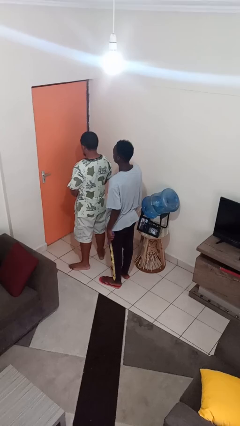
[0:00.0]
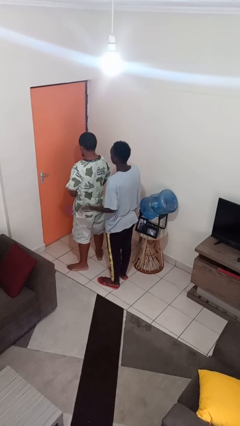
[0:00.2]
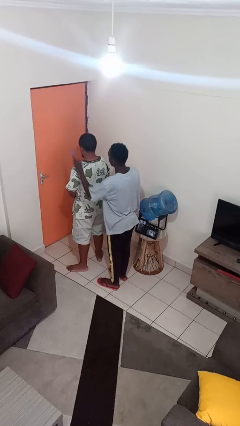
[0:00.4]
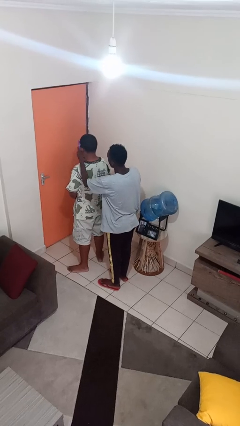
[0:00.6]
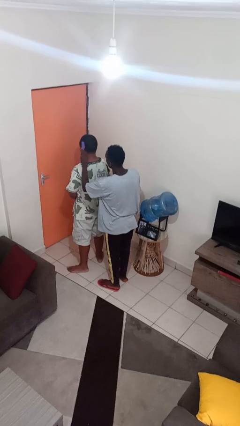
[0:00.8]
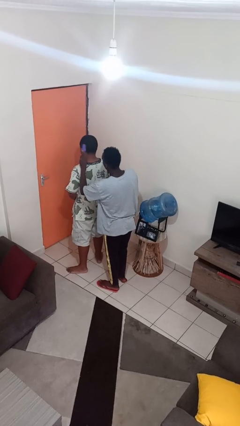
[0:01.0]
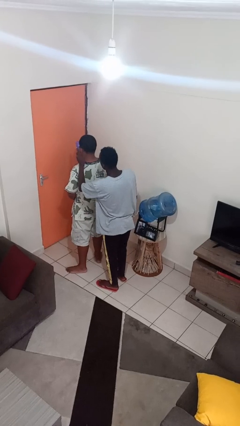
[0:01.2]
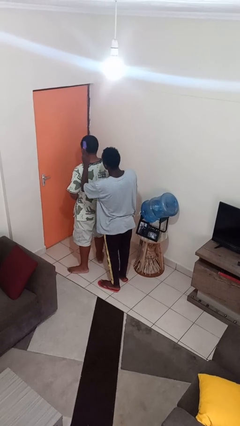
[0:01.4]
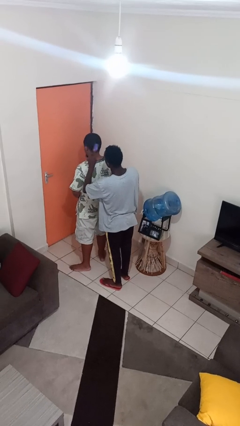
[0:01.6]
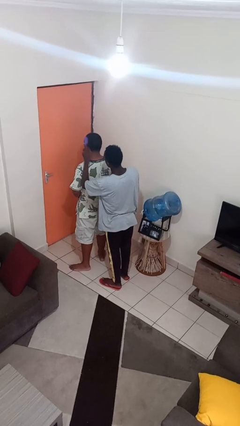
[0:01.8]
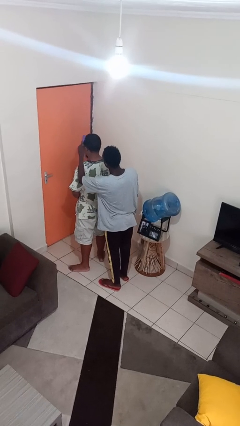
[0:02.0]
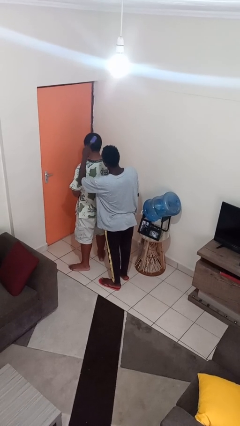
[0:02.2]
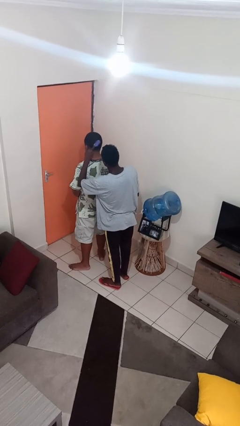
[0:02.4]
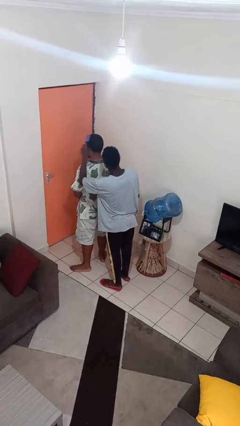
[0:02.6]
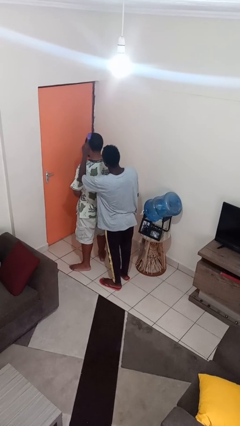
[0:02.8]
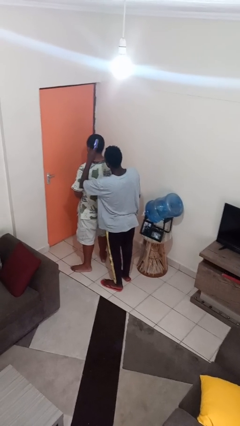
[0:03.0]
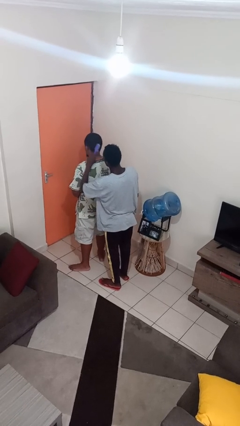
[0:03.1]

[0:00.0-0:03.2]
person brushes hair of person

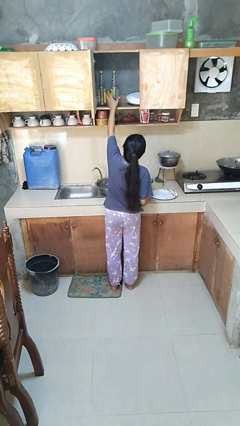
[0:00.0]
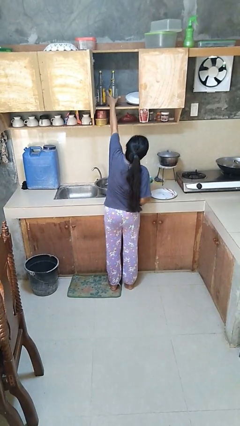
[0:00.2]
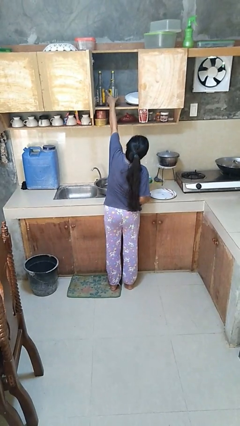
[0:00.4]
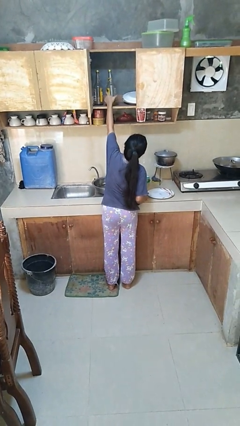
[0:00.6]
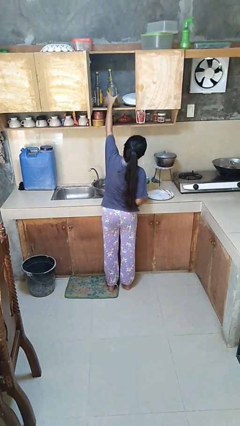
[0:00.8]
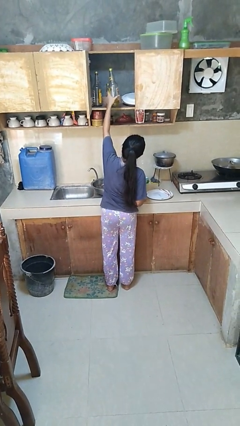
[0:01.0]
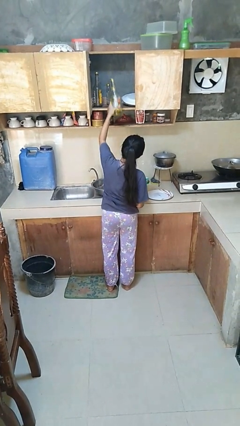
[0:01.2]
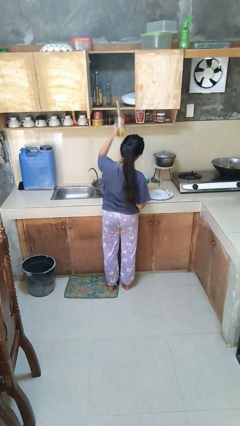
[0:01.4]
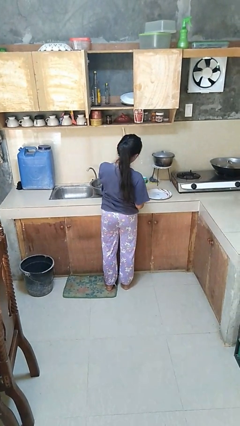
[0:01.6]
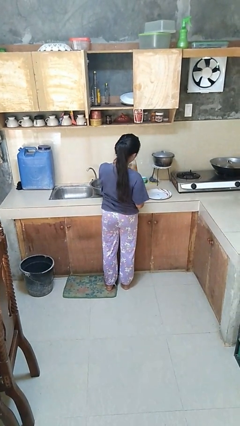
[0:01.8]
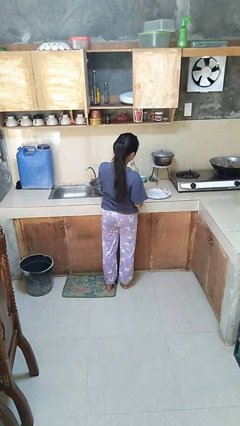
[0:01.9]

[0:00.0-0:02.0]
person takes object from cabinet

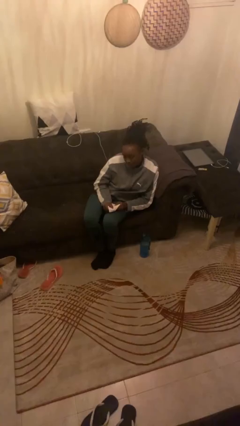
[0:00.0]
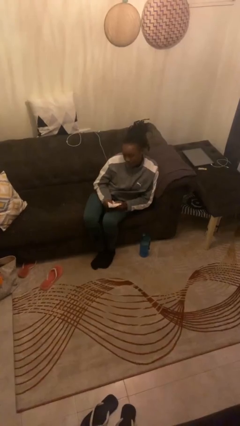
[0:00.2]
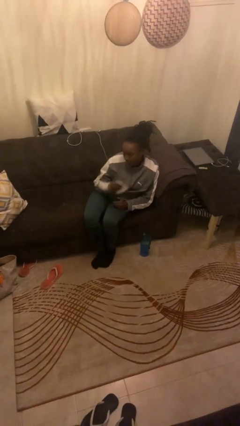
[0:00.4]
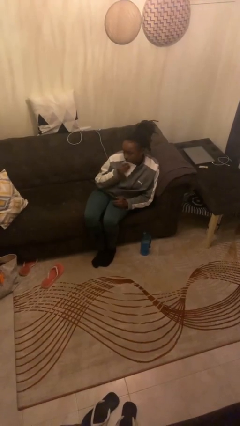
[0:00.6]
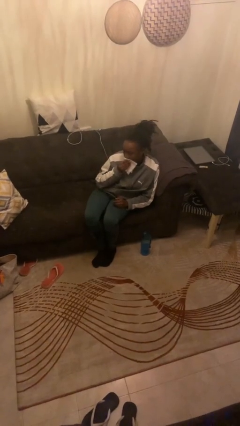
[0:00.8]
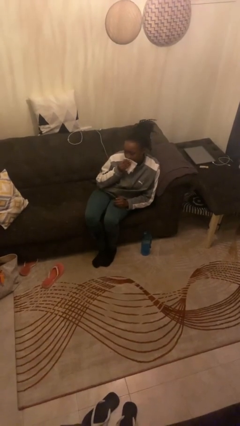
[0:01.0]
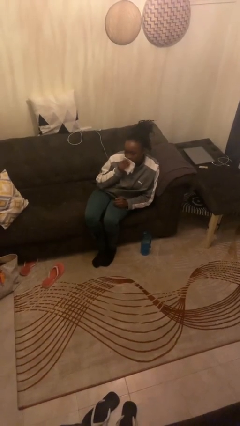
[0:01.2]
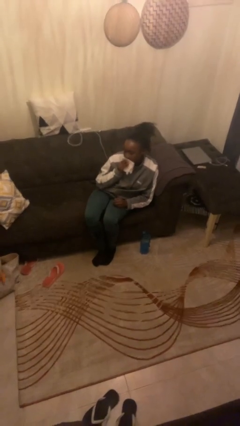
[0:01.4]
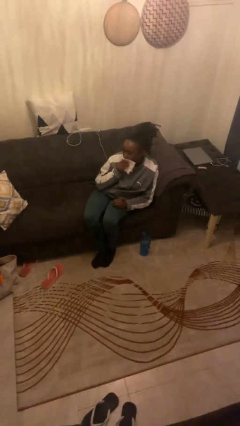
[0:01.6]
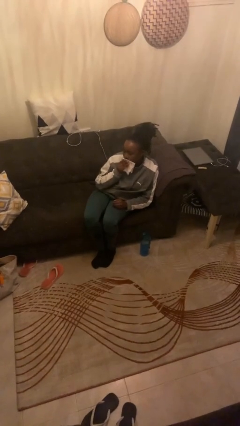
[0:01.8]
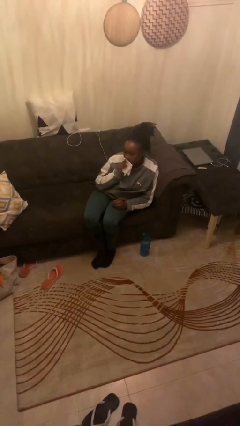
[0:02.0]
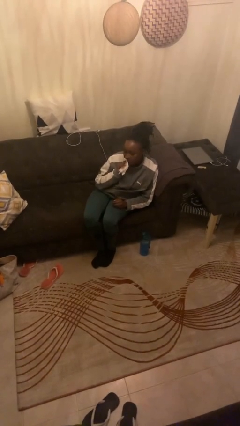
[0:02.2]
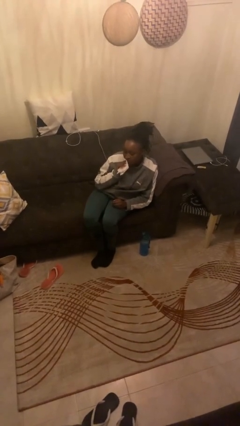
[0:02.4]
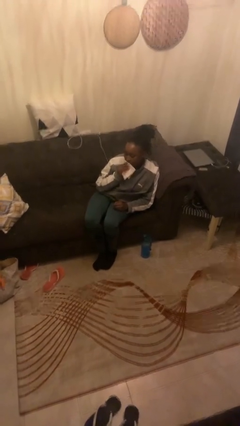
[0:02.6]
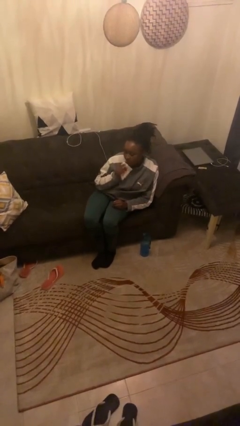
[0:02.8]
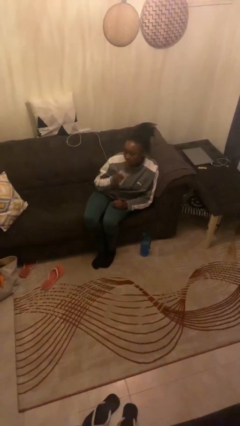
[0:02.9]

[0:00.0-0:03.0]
person wipes mouth with napkin

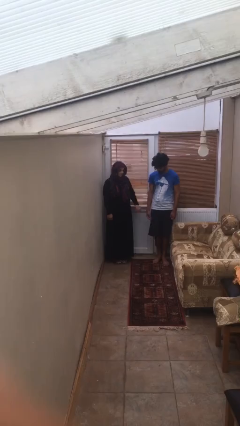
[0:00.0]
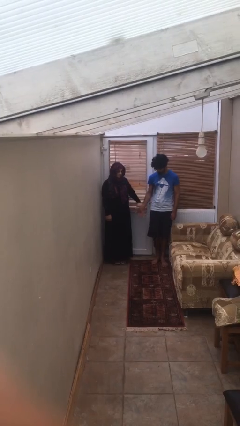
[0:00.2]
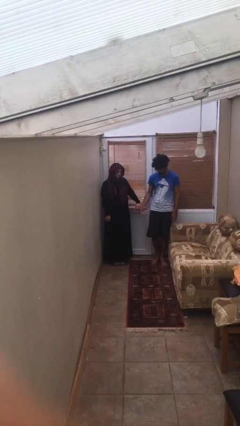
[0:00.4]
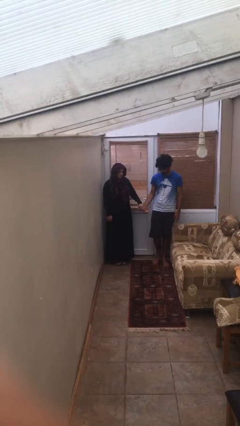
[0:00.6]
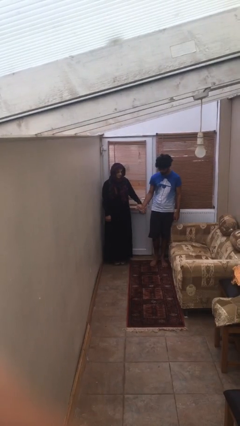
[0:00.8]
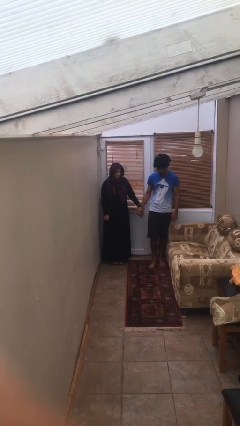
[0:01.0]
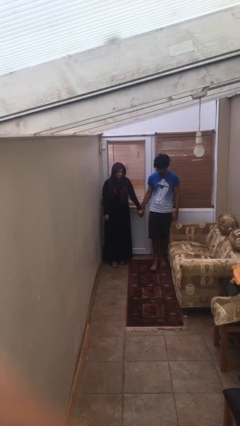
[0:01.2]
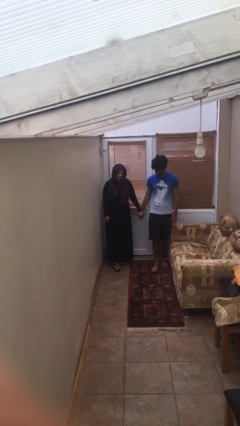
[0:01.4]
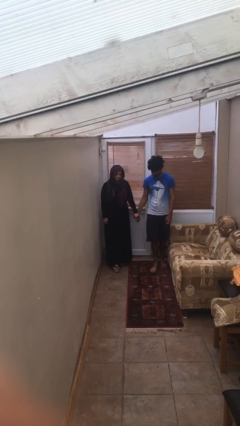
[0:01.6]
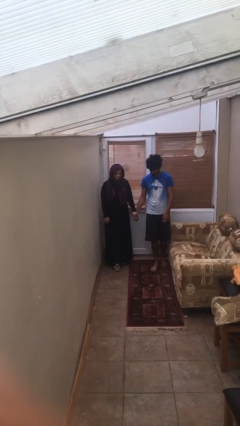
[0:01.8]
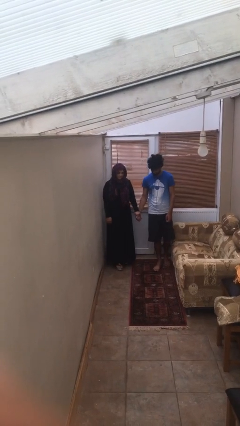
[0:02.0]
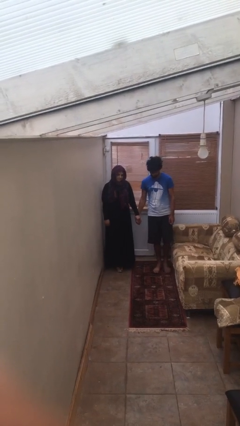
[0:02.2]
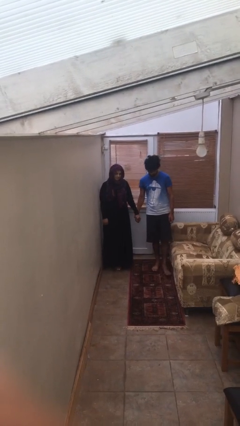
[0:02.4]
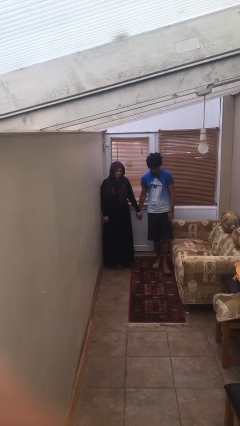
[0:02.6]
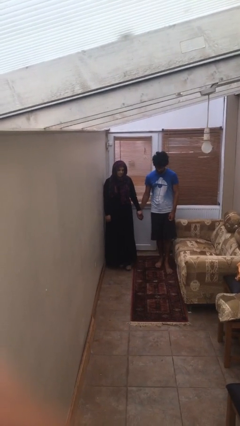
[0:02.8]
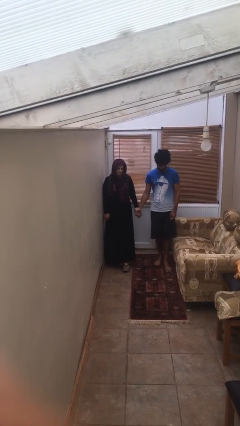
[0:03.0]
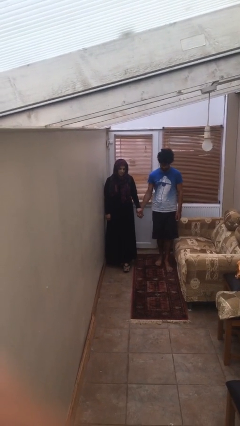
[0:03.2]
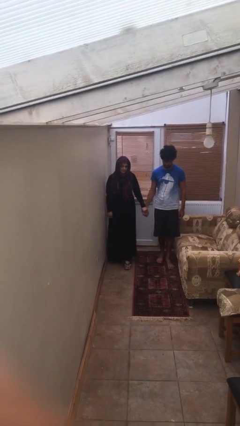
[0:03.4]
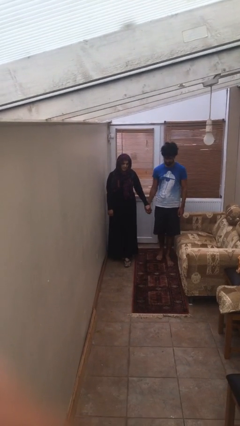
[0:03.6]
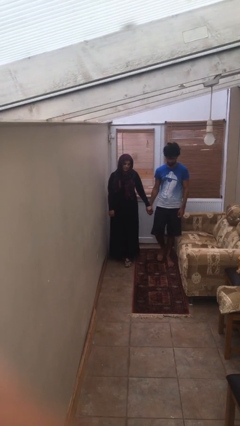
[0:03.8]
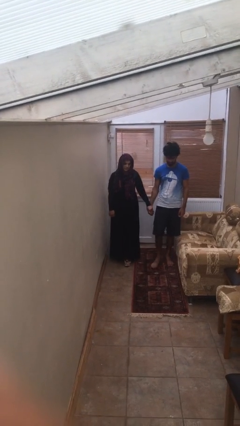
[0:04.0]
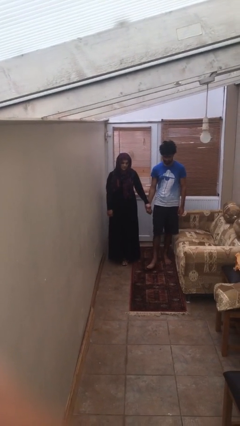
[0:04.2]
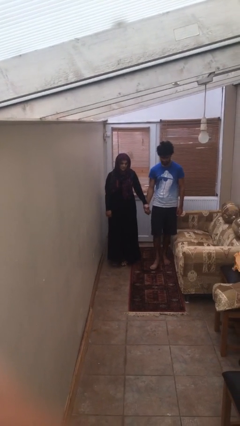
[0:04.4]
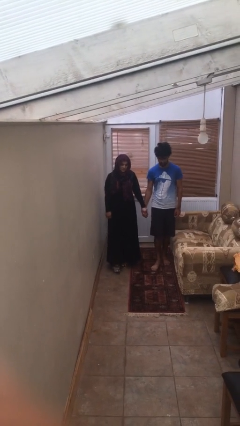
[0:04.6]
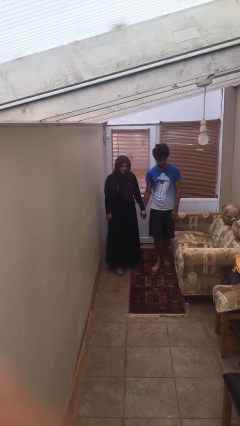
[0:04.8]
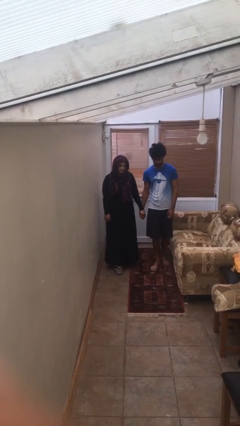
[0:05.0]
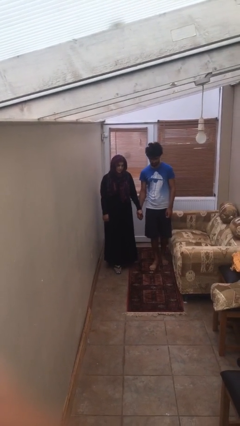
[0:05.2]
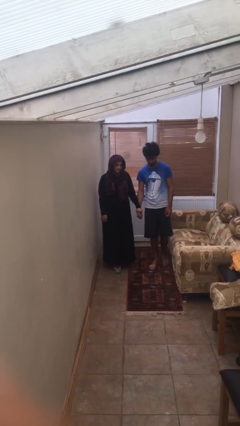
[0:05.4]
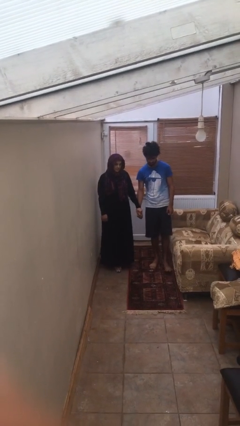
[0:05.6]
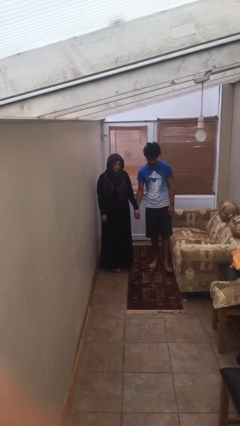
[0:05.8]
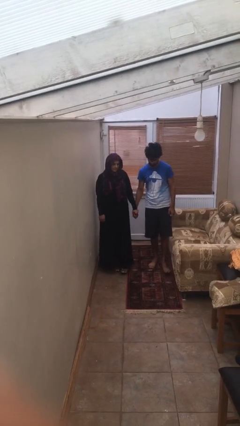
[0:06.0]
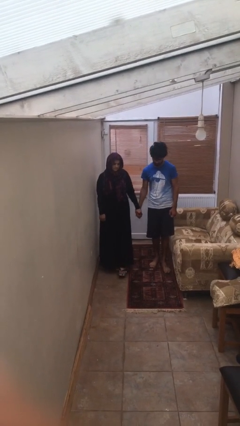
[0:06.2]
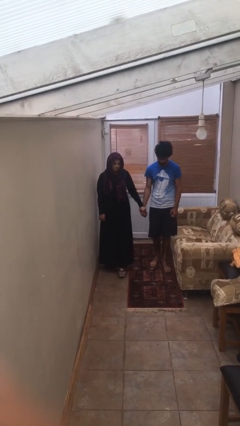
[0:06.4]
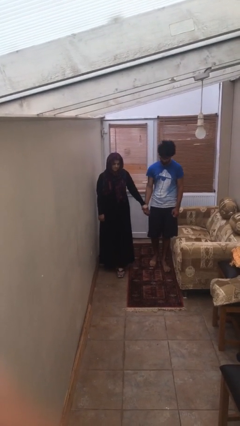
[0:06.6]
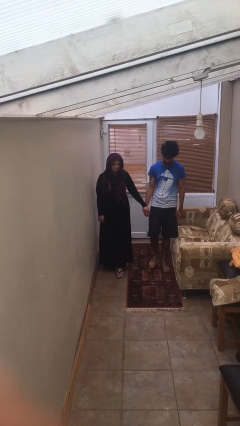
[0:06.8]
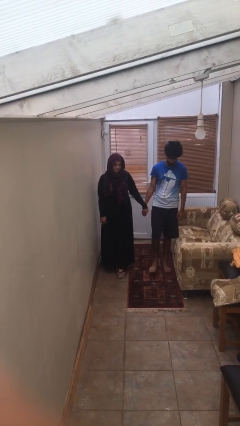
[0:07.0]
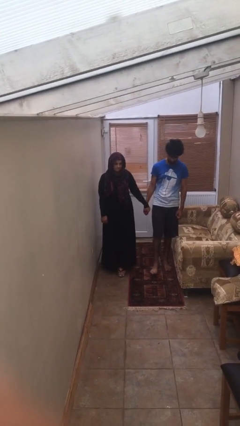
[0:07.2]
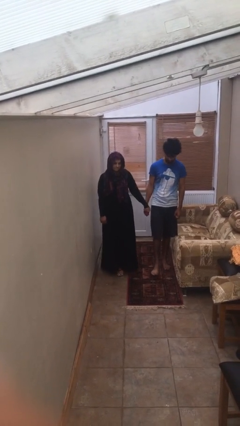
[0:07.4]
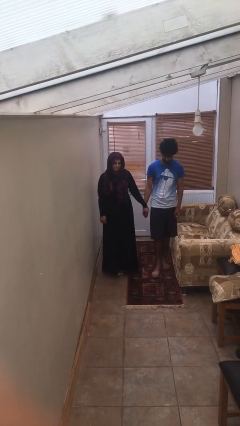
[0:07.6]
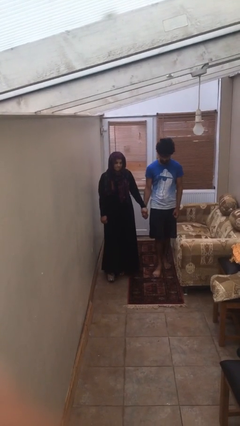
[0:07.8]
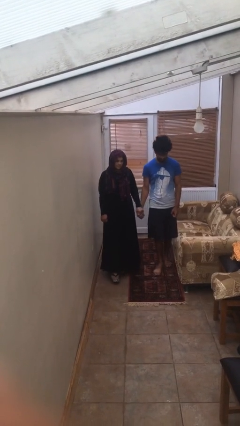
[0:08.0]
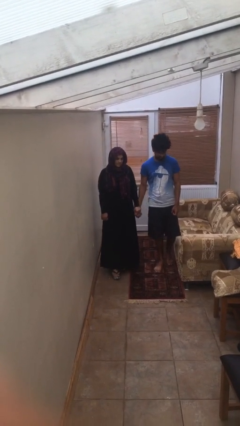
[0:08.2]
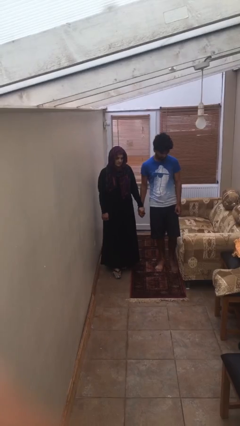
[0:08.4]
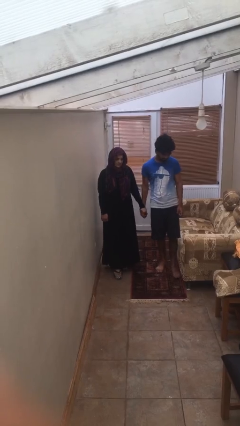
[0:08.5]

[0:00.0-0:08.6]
person holds hand
